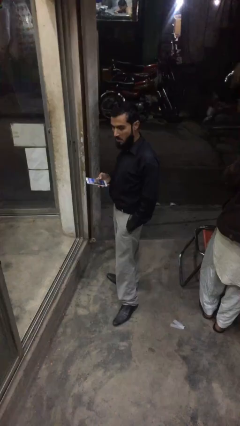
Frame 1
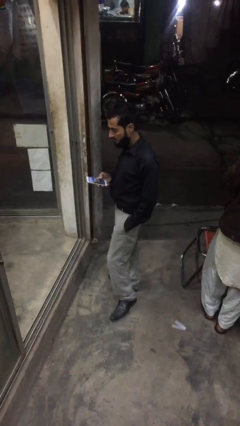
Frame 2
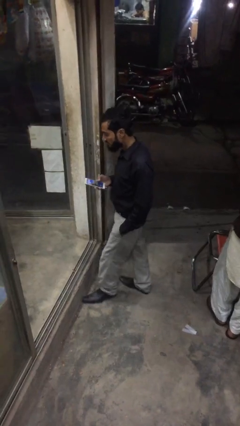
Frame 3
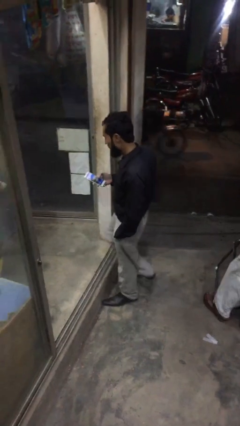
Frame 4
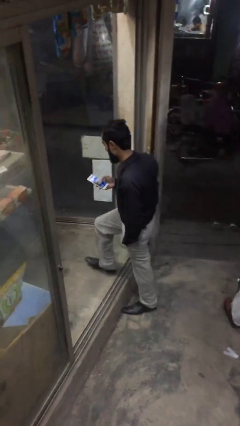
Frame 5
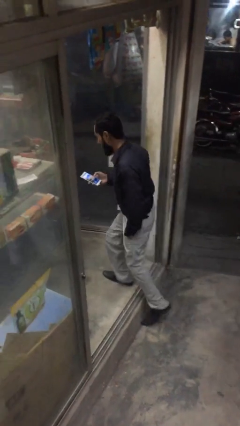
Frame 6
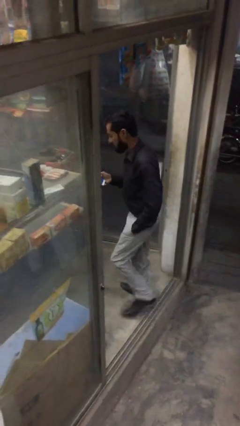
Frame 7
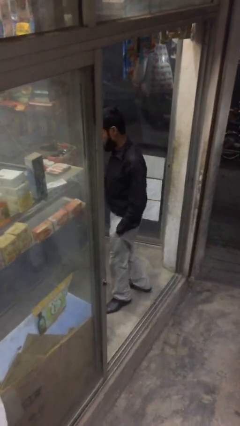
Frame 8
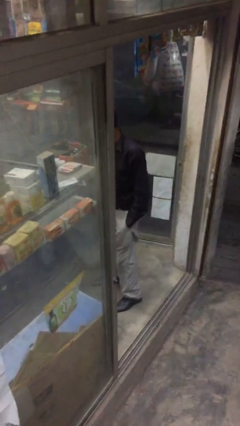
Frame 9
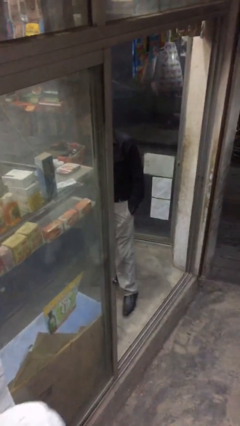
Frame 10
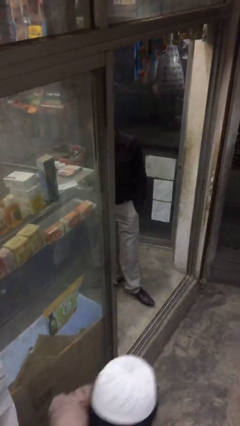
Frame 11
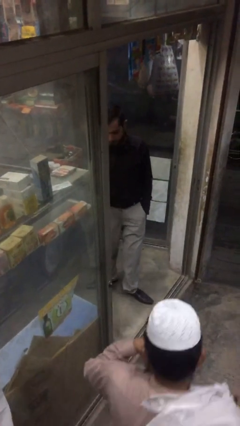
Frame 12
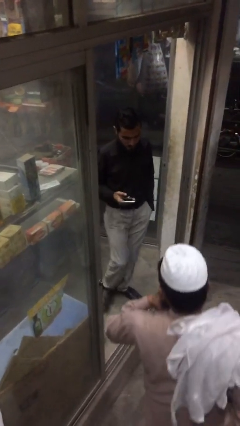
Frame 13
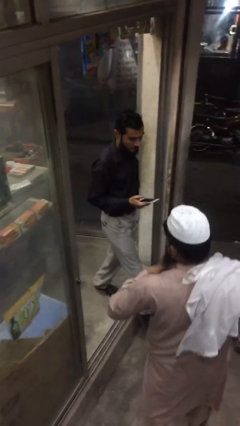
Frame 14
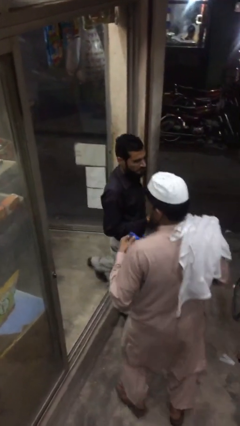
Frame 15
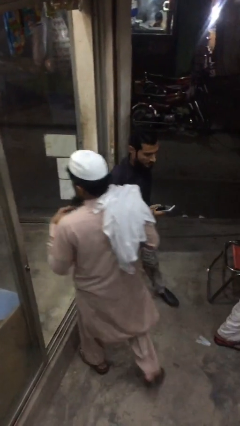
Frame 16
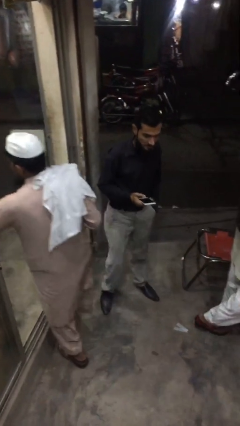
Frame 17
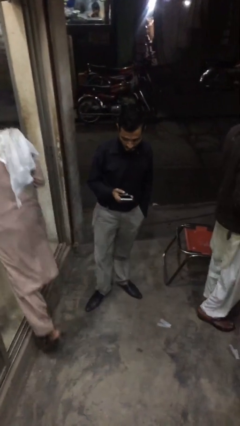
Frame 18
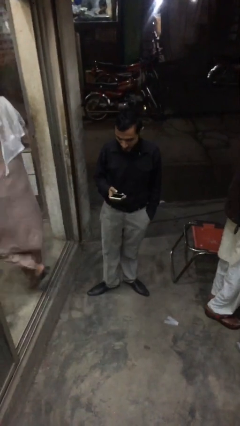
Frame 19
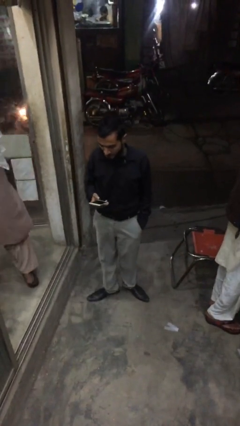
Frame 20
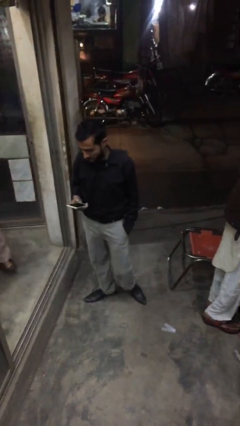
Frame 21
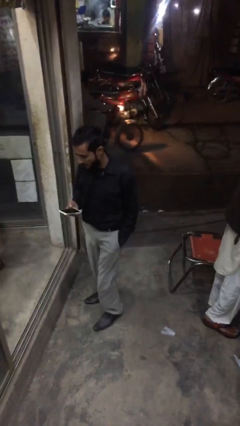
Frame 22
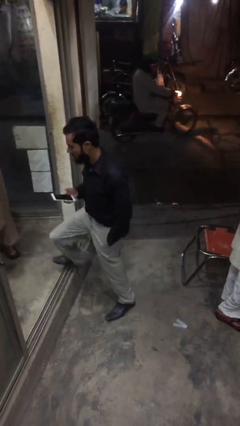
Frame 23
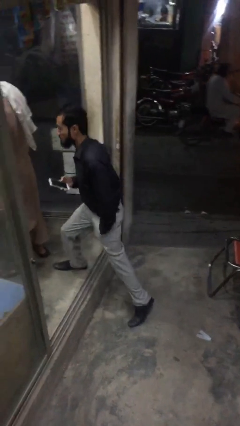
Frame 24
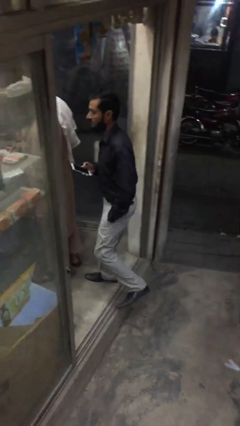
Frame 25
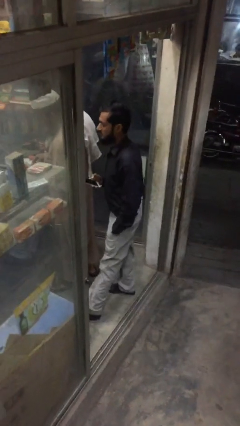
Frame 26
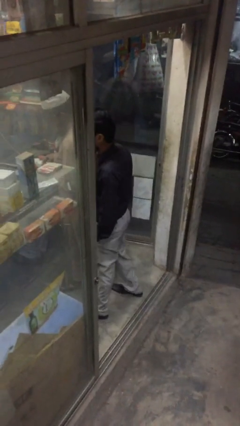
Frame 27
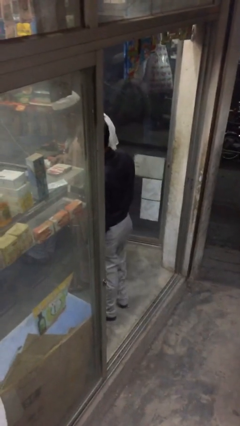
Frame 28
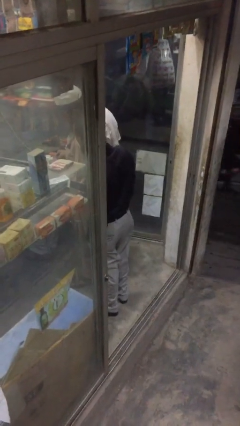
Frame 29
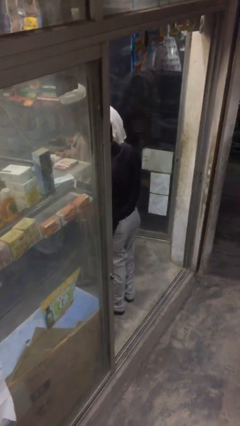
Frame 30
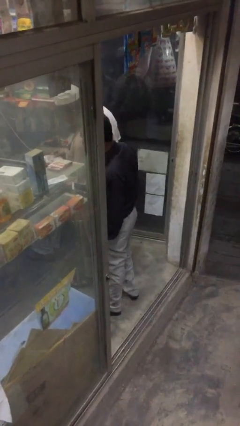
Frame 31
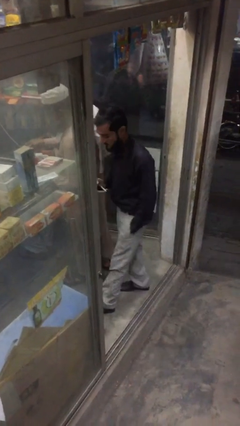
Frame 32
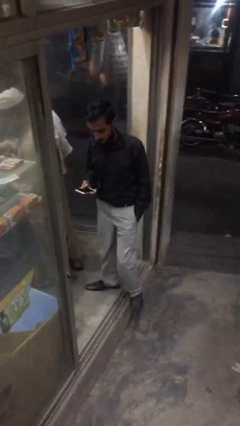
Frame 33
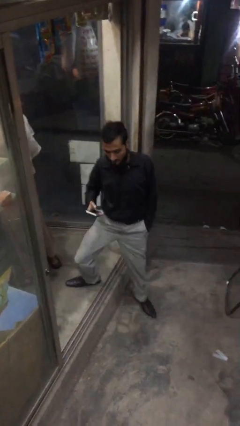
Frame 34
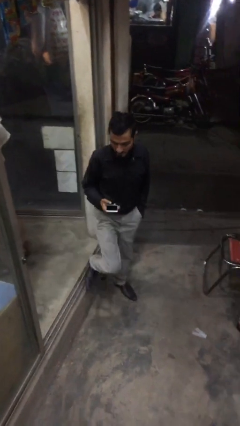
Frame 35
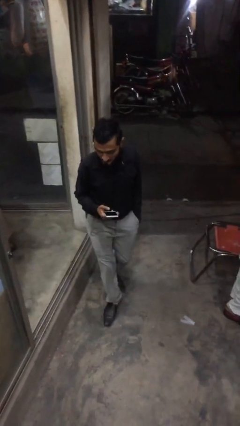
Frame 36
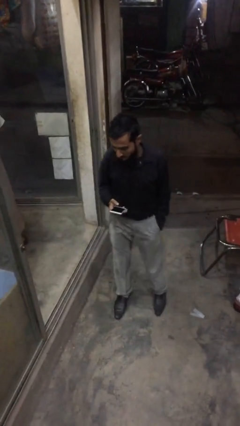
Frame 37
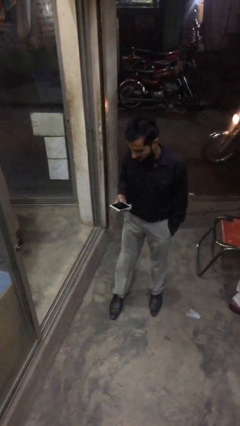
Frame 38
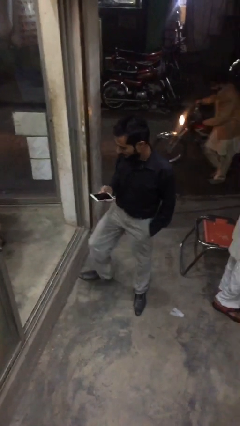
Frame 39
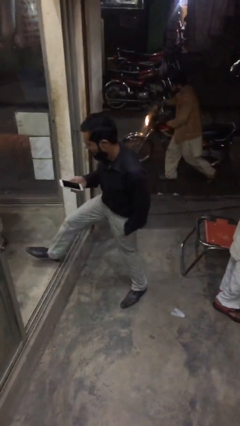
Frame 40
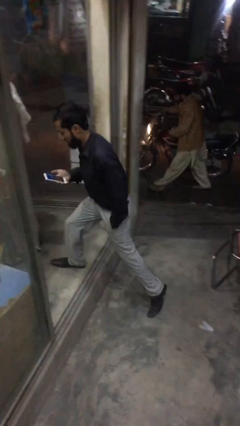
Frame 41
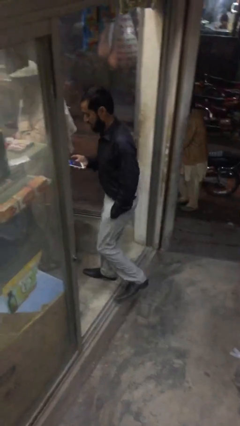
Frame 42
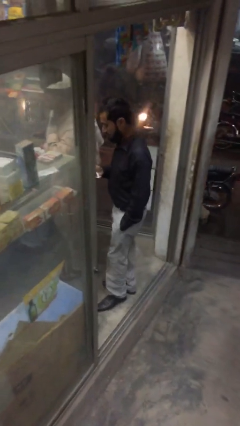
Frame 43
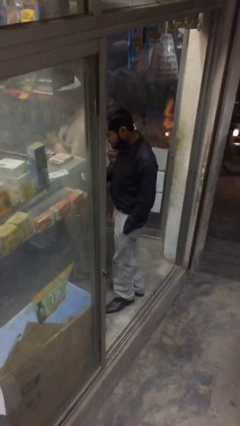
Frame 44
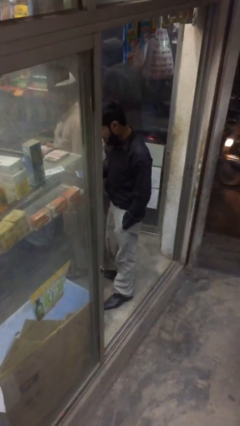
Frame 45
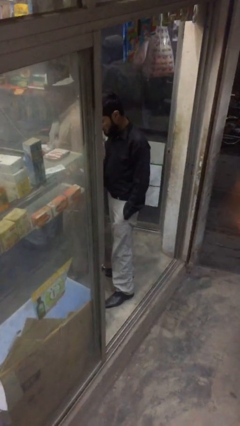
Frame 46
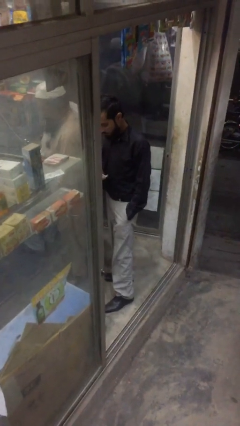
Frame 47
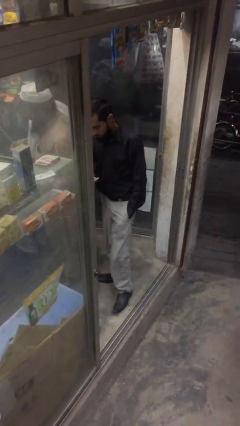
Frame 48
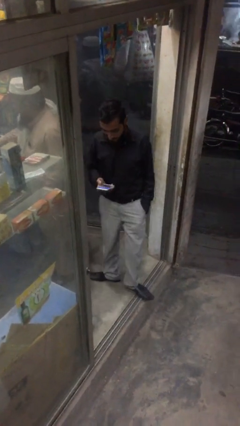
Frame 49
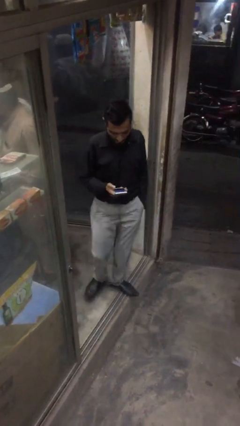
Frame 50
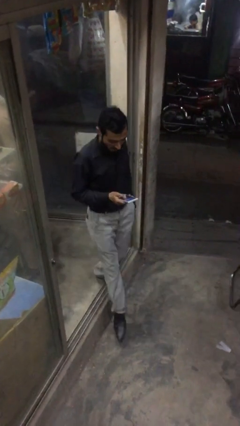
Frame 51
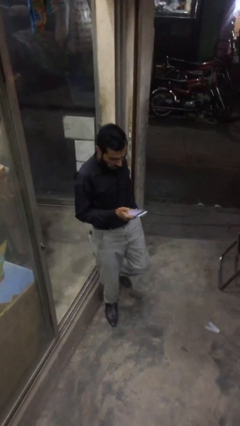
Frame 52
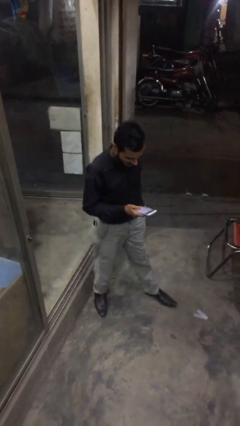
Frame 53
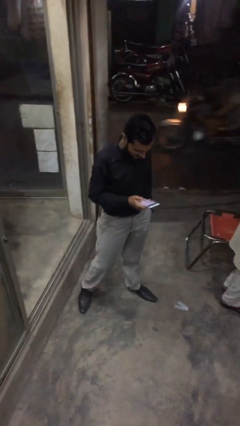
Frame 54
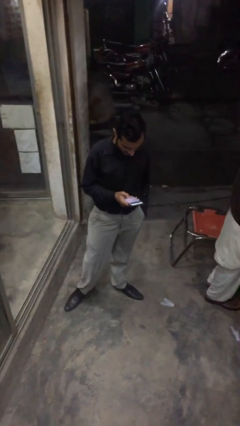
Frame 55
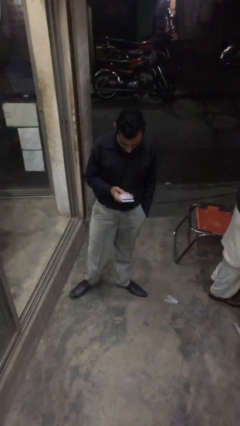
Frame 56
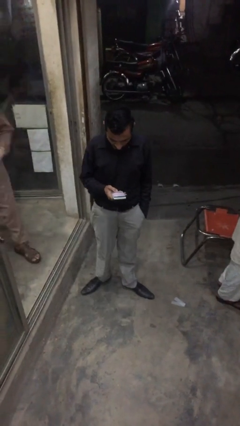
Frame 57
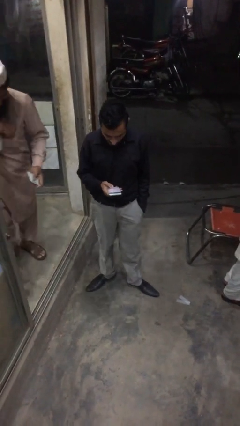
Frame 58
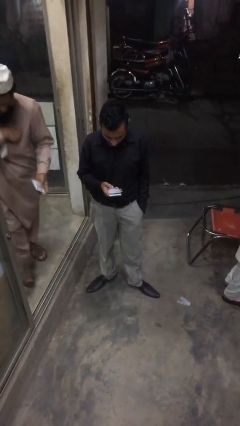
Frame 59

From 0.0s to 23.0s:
person texts on phone

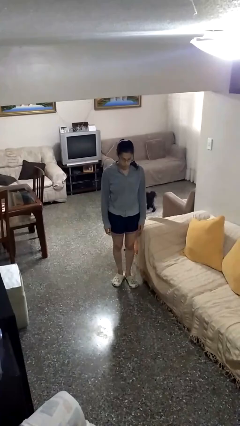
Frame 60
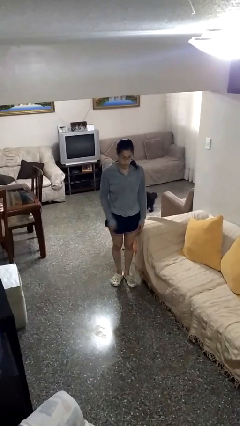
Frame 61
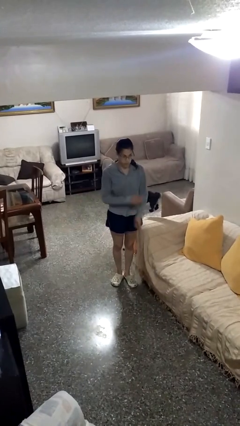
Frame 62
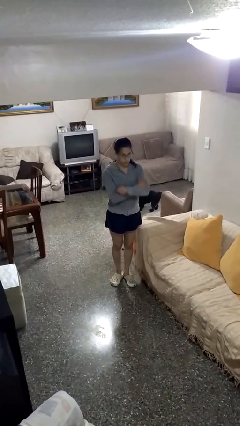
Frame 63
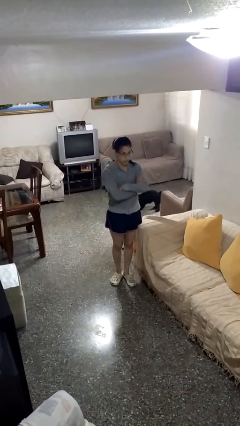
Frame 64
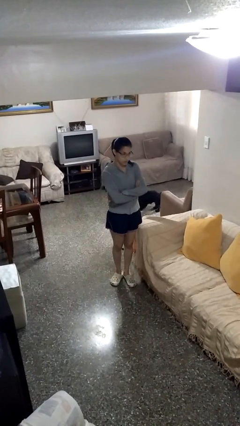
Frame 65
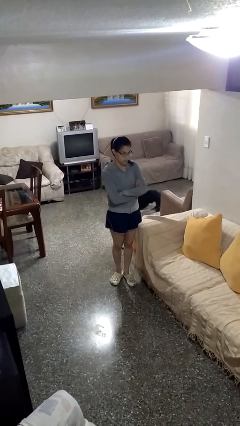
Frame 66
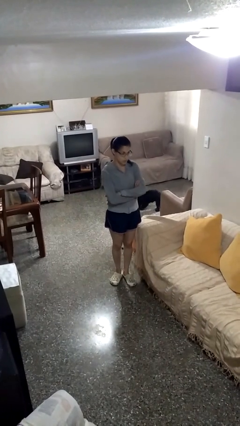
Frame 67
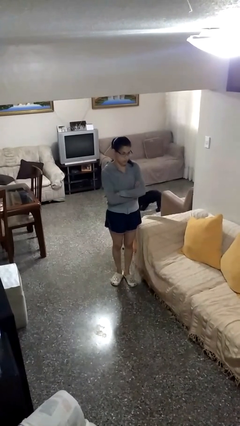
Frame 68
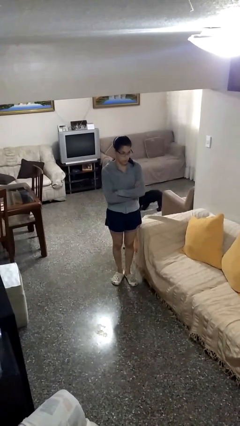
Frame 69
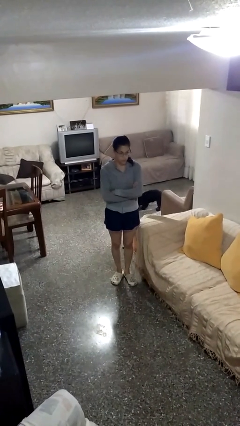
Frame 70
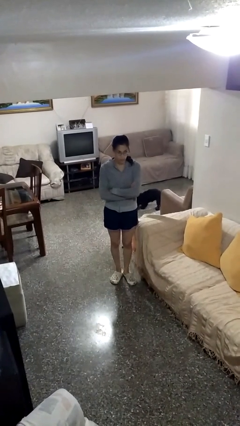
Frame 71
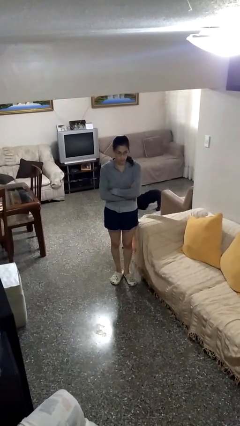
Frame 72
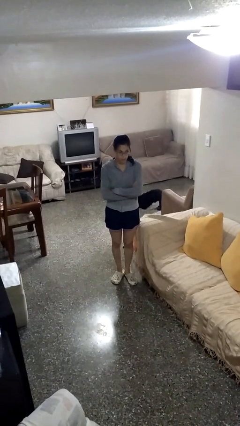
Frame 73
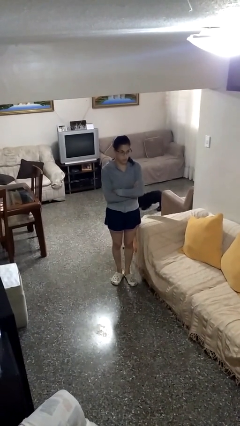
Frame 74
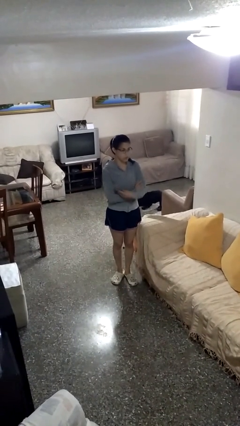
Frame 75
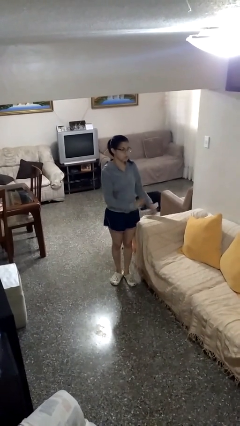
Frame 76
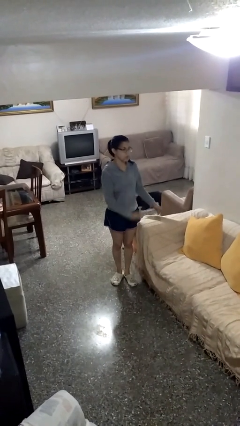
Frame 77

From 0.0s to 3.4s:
person crosses arms

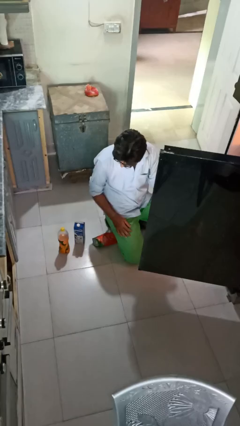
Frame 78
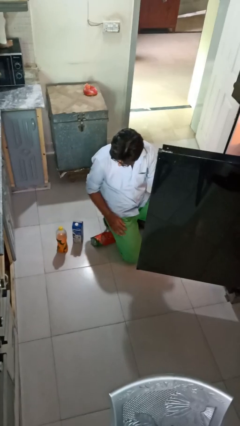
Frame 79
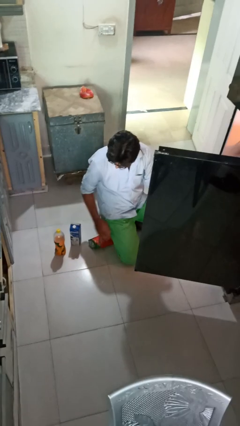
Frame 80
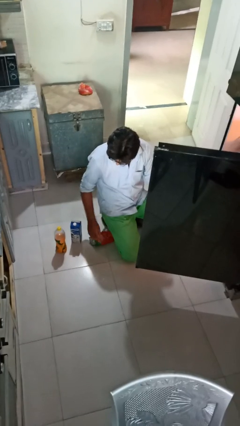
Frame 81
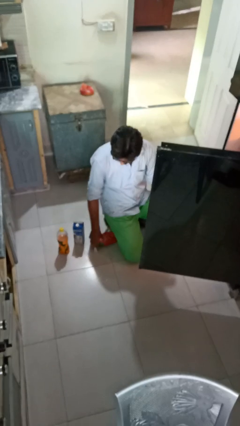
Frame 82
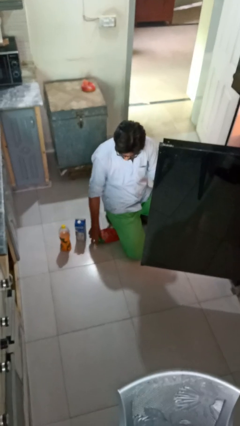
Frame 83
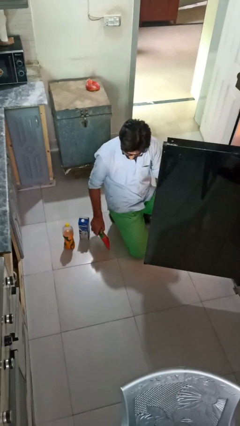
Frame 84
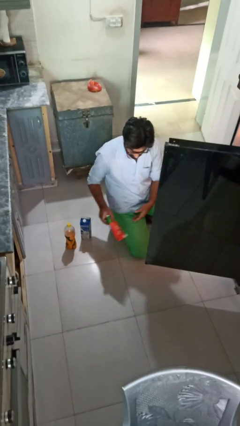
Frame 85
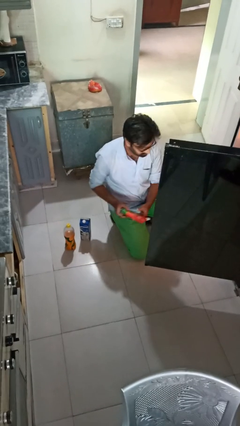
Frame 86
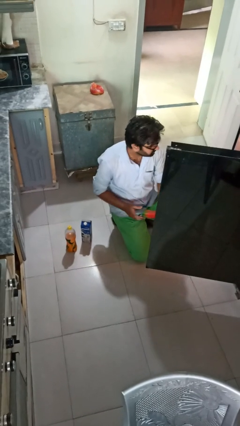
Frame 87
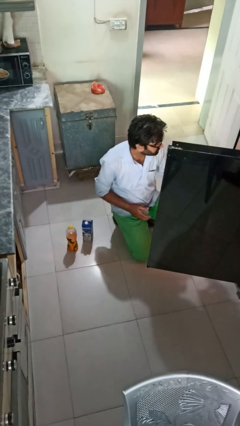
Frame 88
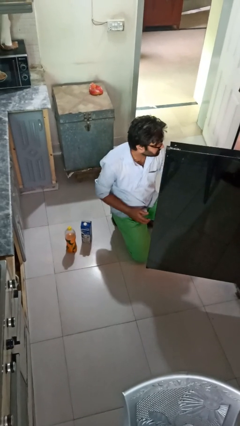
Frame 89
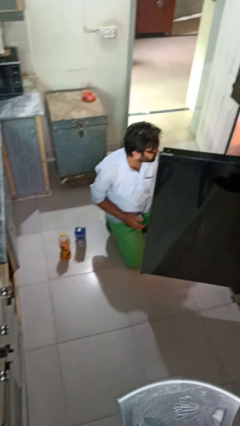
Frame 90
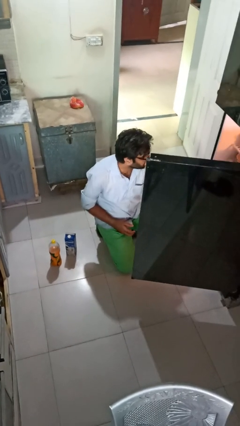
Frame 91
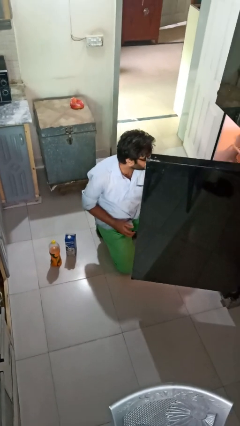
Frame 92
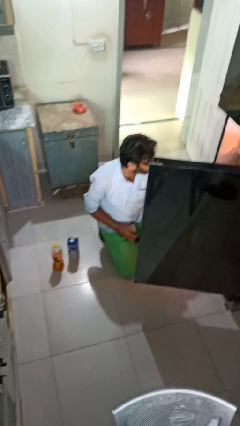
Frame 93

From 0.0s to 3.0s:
person loads groceries into refrigerator
